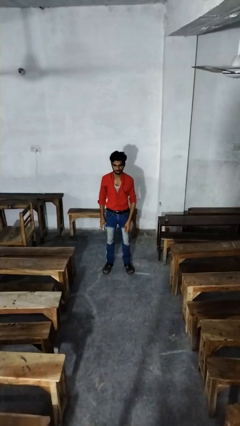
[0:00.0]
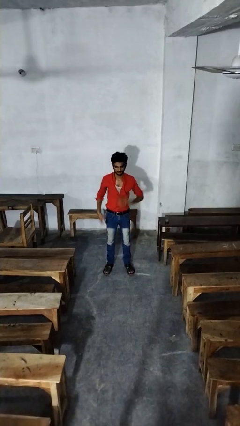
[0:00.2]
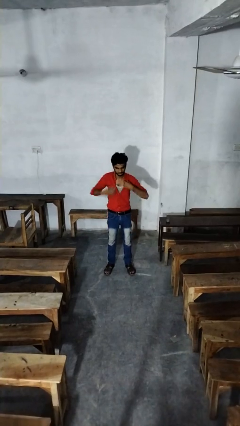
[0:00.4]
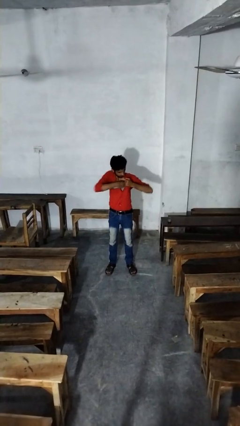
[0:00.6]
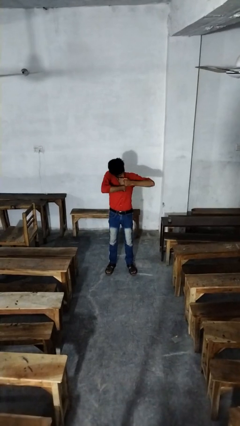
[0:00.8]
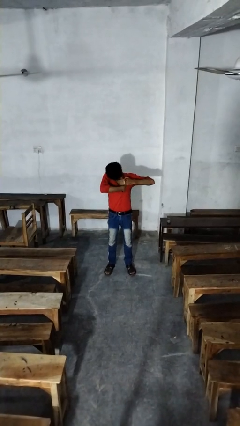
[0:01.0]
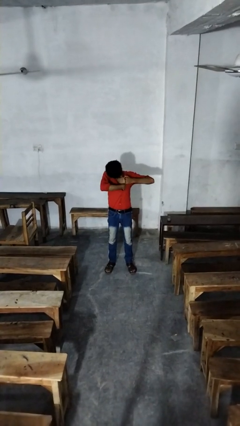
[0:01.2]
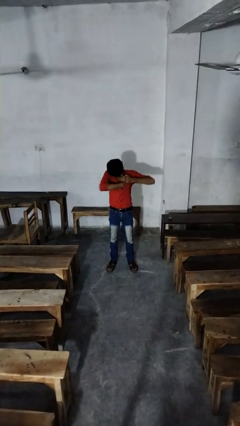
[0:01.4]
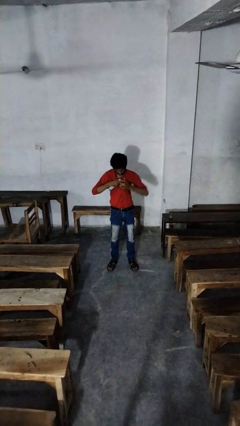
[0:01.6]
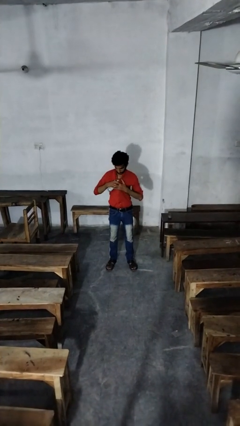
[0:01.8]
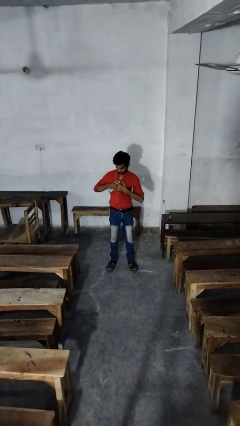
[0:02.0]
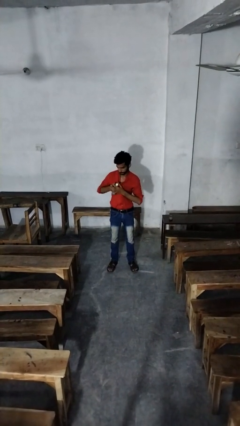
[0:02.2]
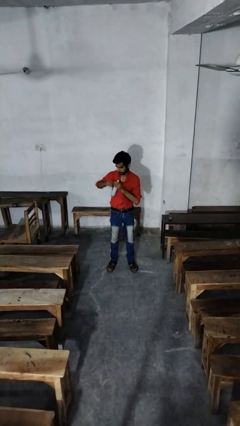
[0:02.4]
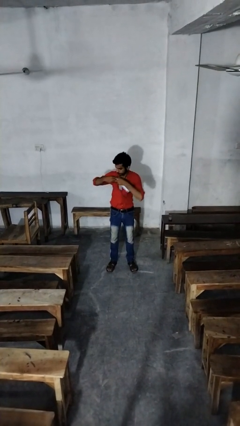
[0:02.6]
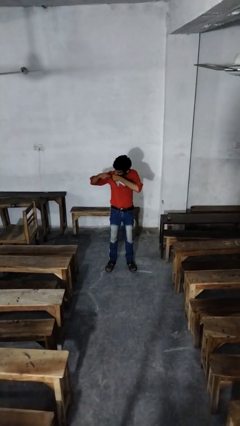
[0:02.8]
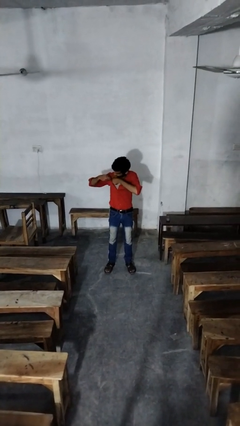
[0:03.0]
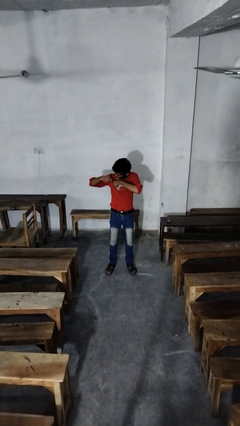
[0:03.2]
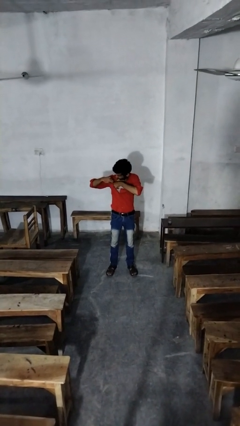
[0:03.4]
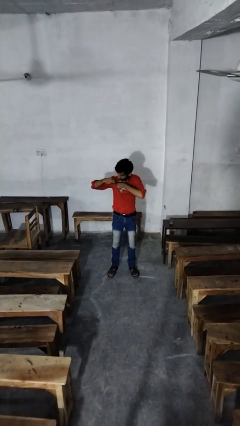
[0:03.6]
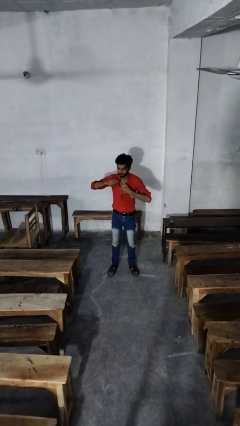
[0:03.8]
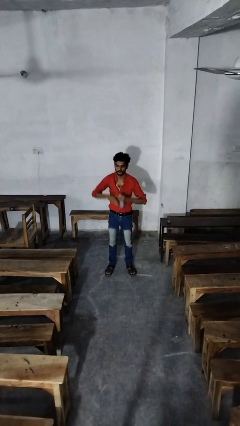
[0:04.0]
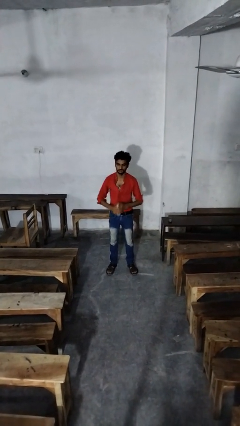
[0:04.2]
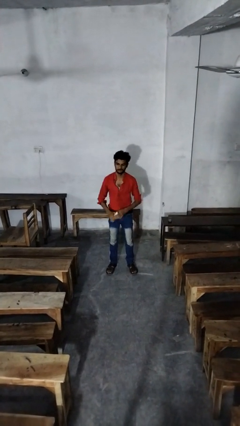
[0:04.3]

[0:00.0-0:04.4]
person applies deodorant

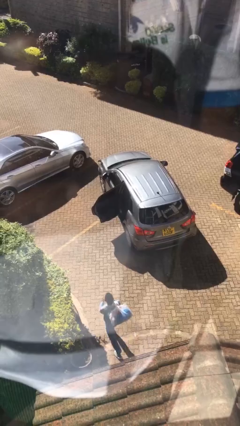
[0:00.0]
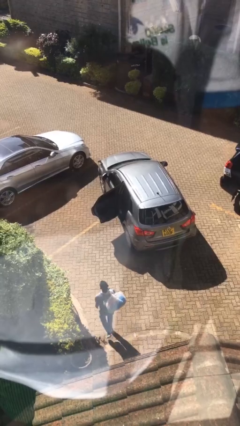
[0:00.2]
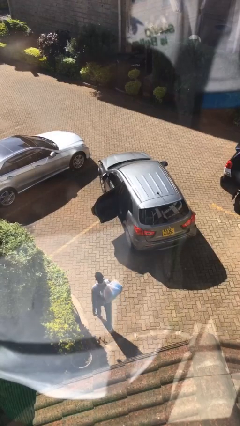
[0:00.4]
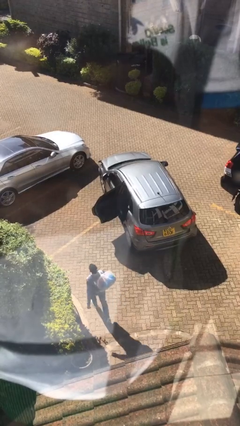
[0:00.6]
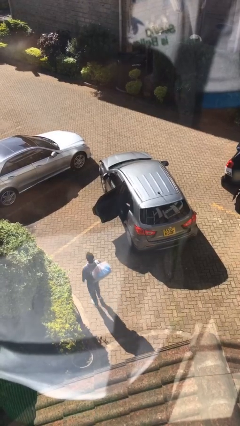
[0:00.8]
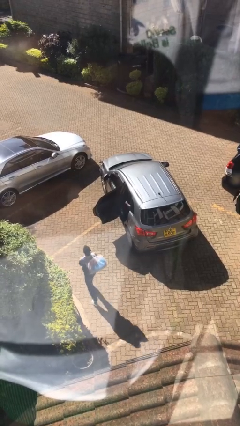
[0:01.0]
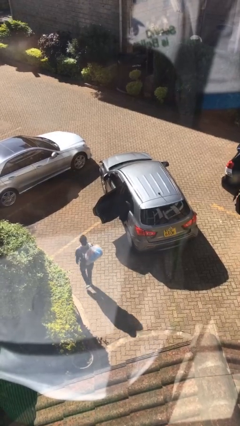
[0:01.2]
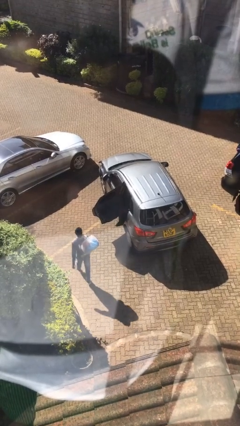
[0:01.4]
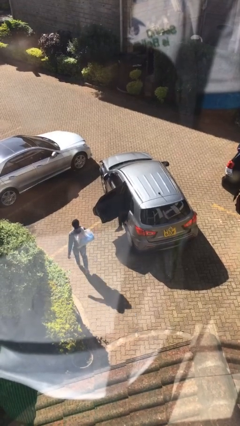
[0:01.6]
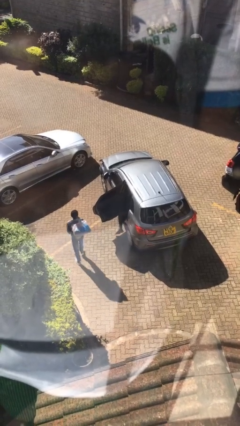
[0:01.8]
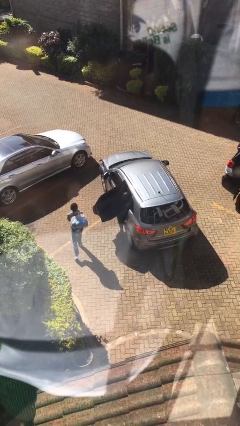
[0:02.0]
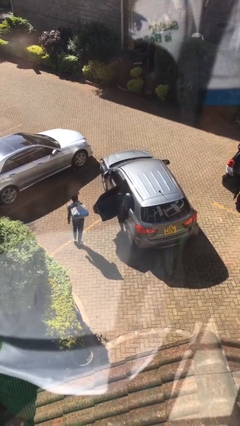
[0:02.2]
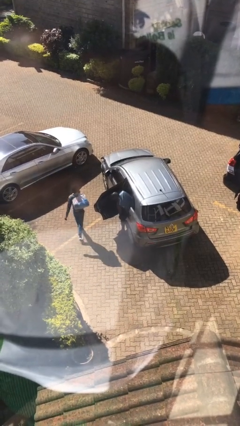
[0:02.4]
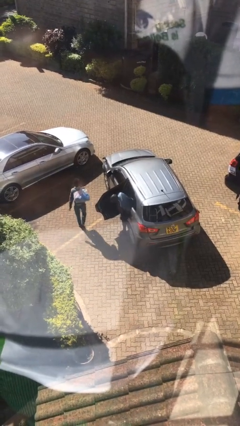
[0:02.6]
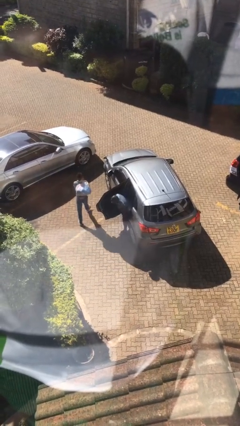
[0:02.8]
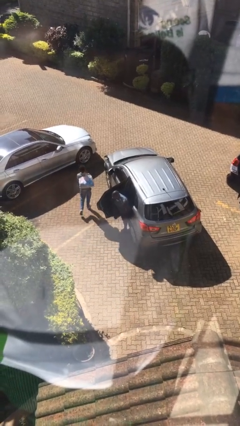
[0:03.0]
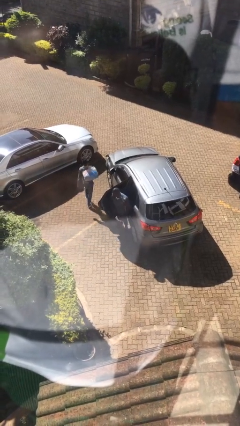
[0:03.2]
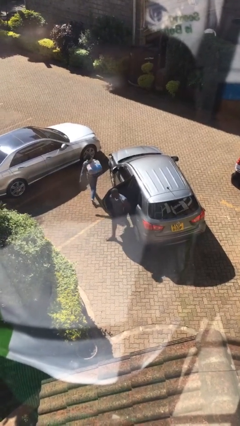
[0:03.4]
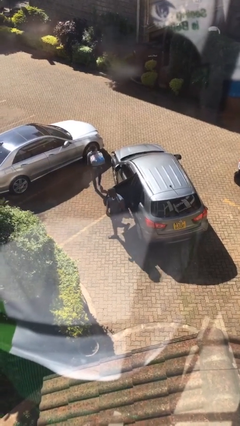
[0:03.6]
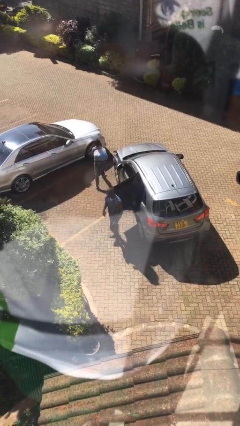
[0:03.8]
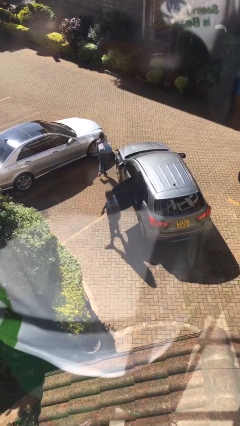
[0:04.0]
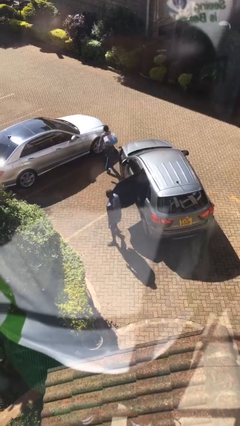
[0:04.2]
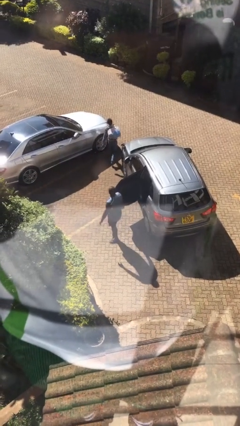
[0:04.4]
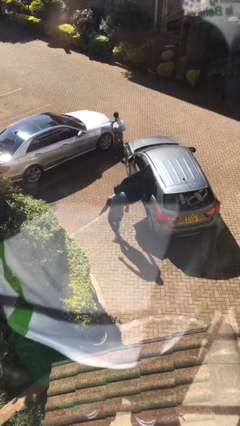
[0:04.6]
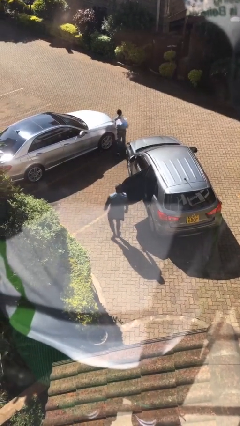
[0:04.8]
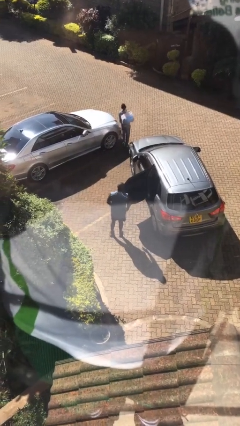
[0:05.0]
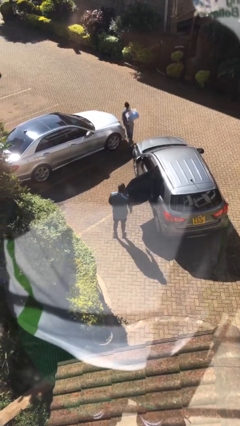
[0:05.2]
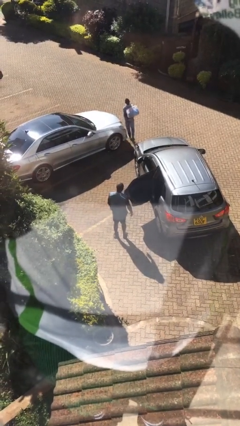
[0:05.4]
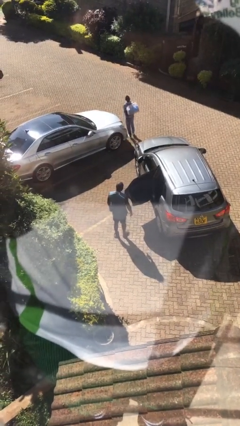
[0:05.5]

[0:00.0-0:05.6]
person exits car

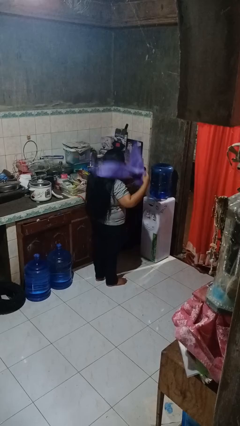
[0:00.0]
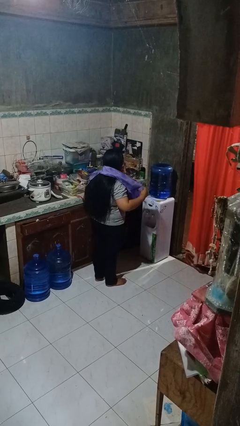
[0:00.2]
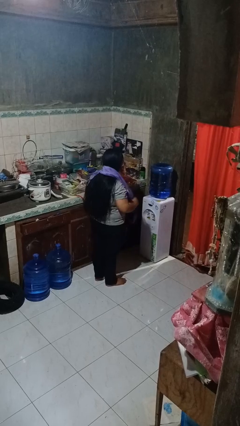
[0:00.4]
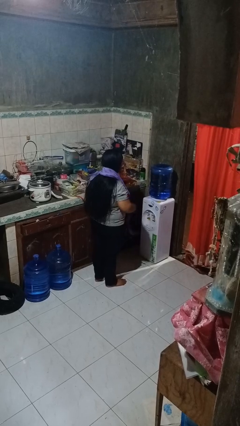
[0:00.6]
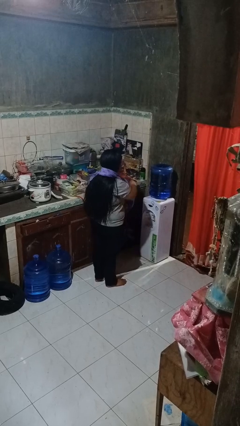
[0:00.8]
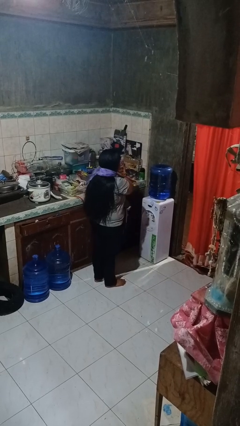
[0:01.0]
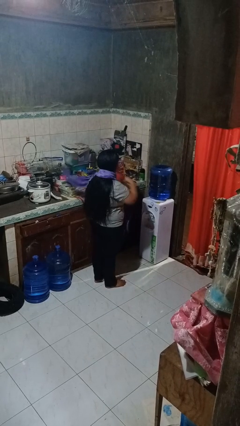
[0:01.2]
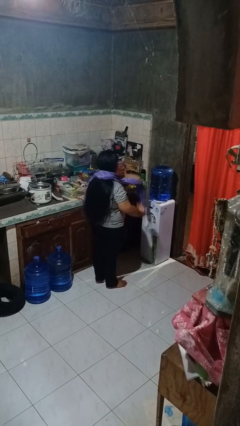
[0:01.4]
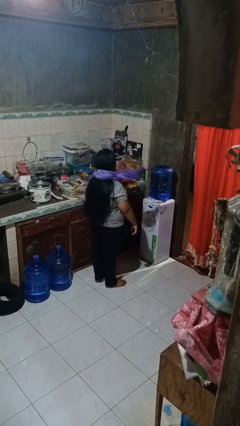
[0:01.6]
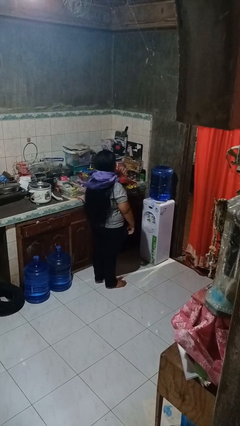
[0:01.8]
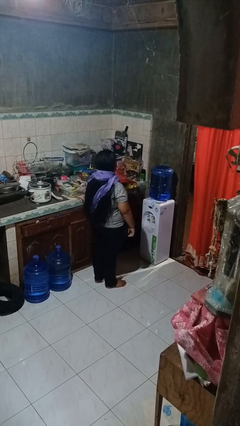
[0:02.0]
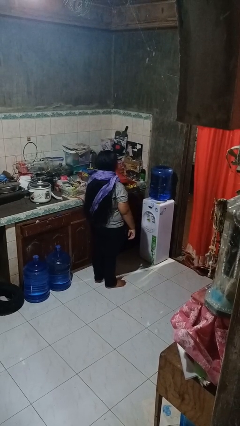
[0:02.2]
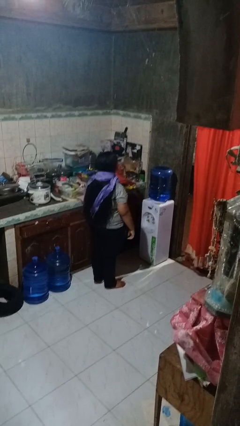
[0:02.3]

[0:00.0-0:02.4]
person puts on scarf

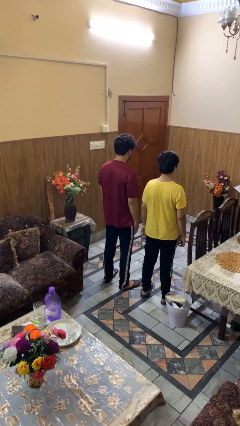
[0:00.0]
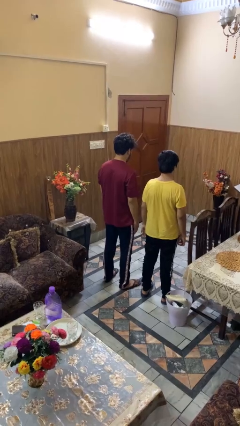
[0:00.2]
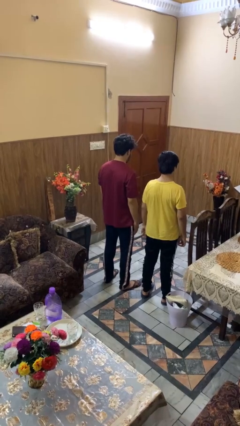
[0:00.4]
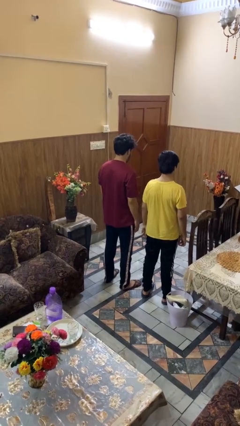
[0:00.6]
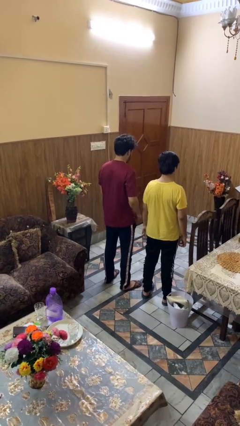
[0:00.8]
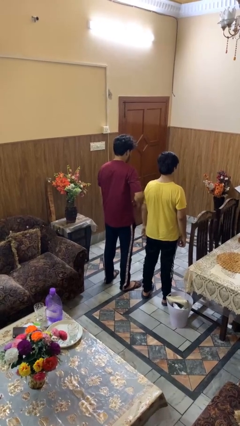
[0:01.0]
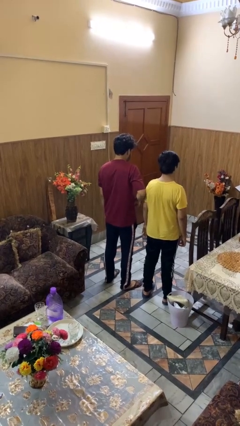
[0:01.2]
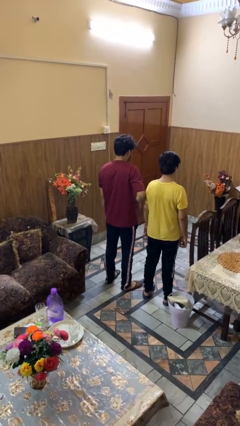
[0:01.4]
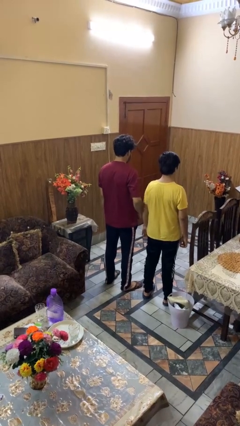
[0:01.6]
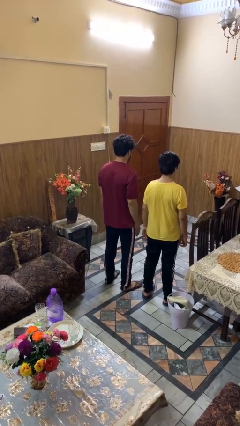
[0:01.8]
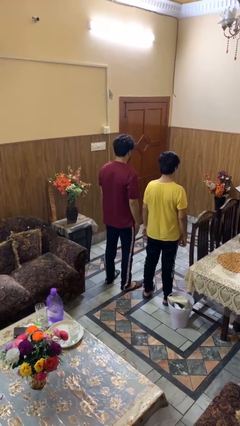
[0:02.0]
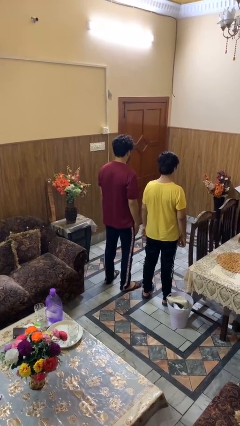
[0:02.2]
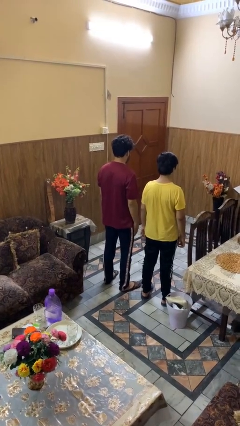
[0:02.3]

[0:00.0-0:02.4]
person nudges person with elbow

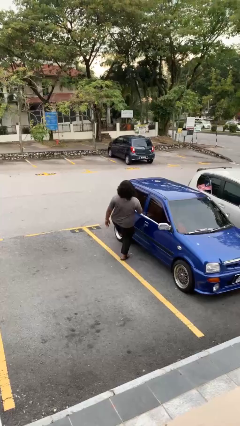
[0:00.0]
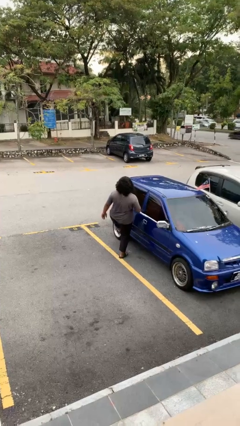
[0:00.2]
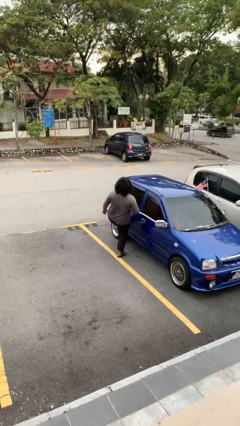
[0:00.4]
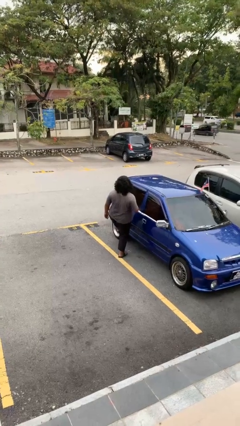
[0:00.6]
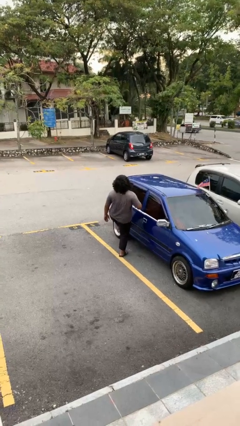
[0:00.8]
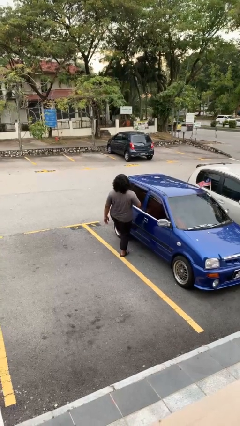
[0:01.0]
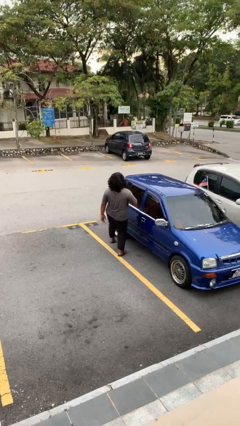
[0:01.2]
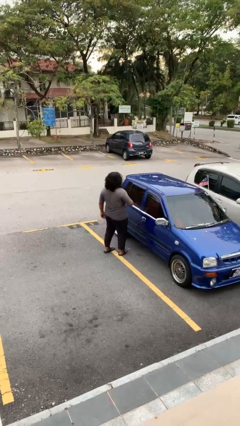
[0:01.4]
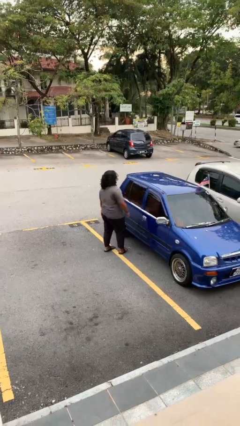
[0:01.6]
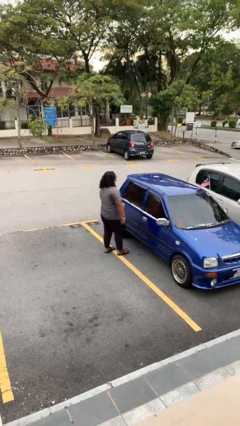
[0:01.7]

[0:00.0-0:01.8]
person kicks car tires

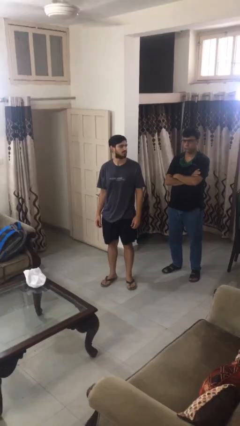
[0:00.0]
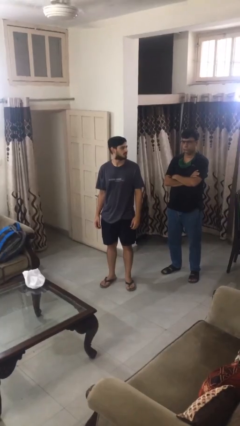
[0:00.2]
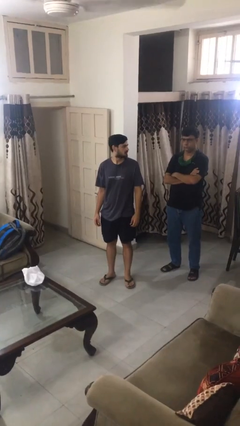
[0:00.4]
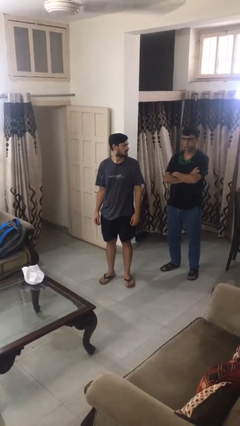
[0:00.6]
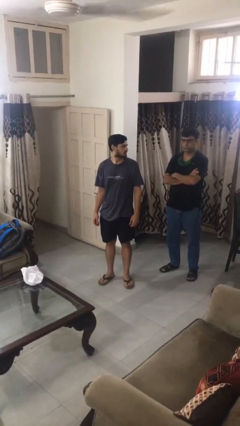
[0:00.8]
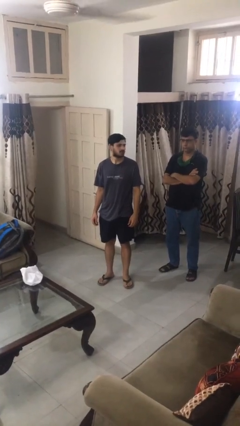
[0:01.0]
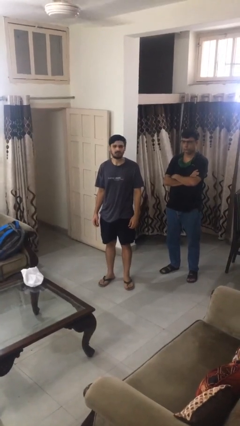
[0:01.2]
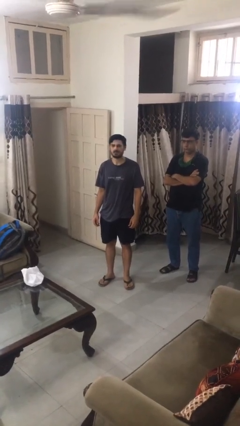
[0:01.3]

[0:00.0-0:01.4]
person looks over shoulder
